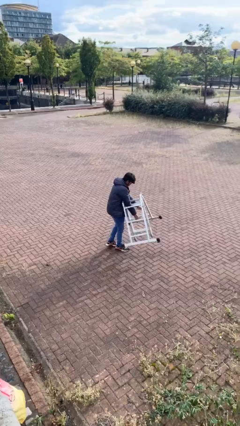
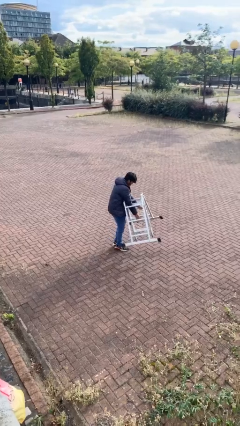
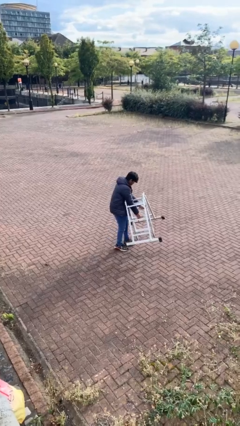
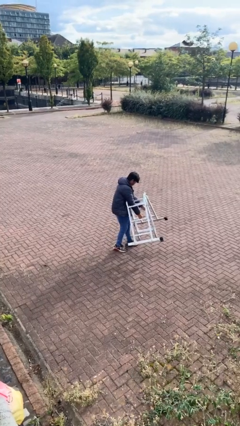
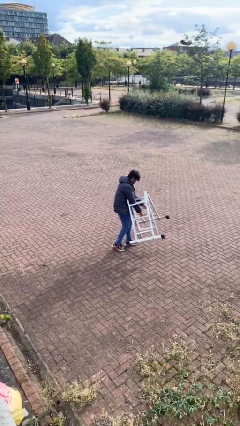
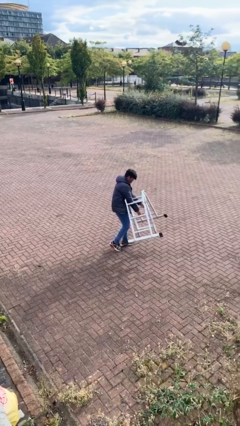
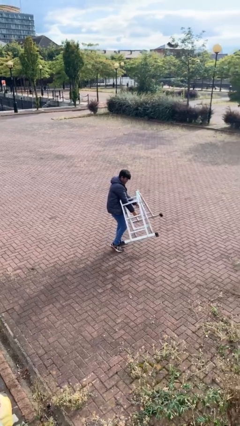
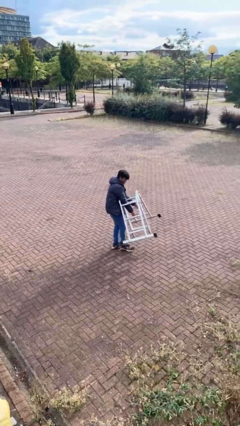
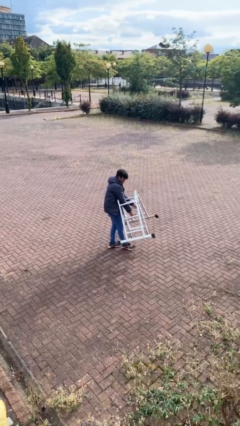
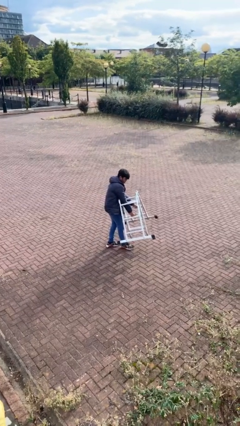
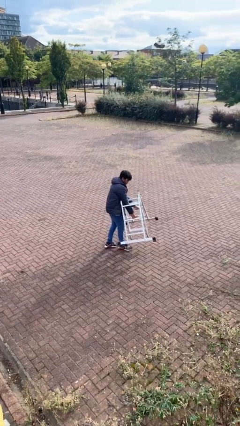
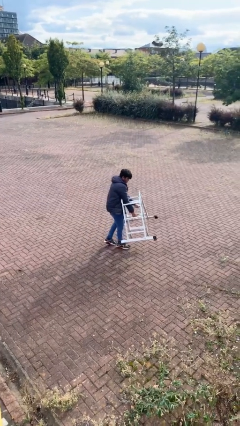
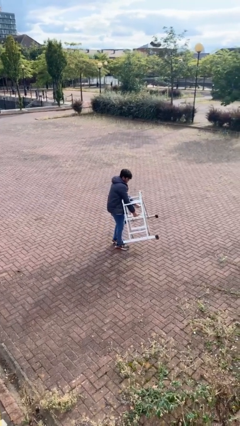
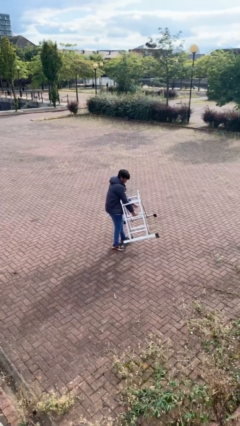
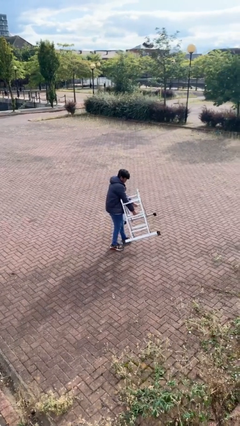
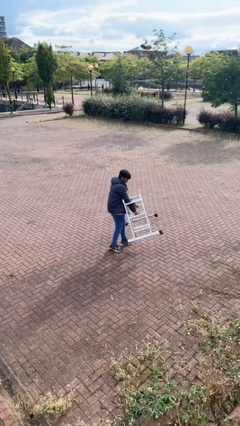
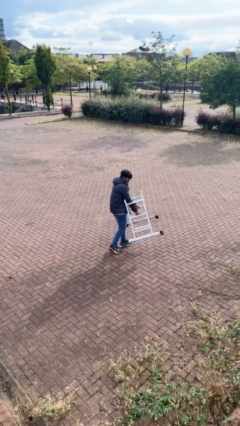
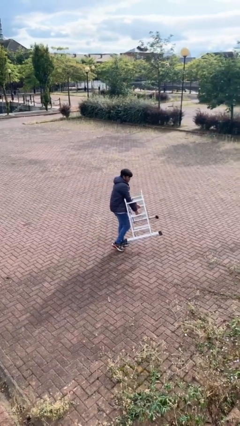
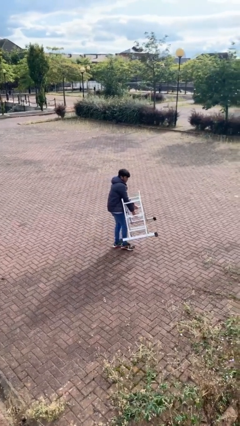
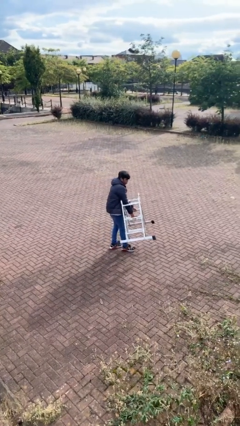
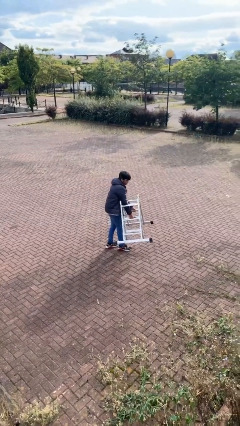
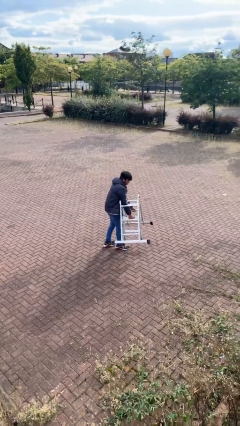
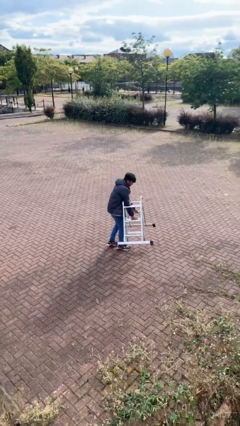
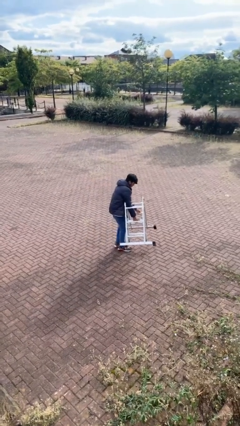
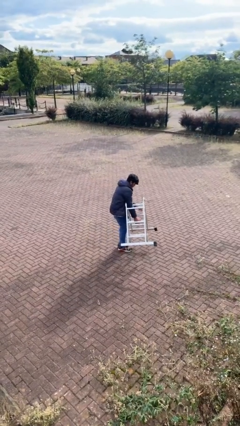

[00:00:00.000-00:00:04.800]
person carries heavy object

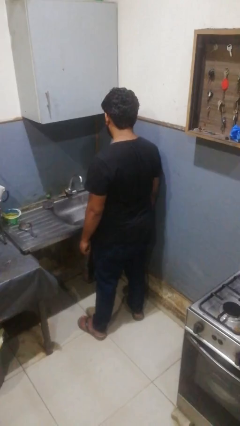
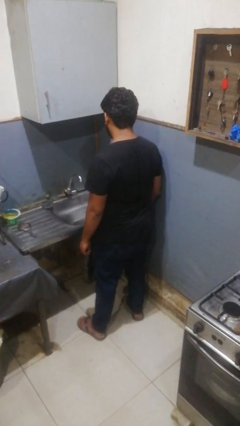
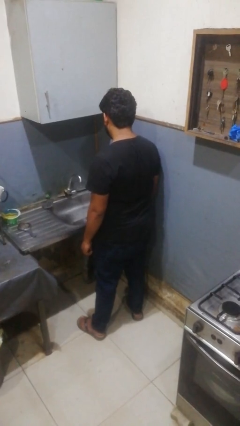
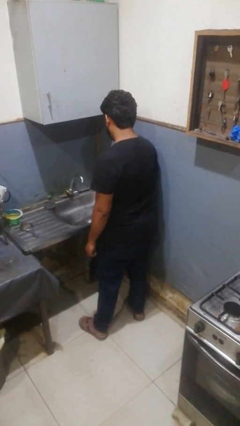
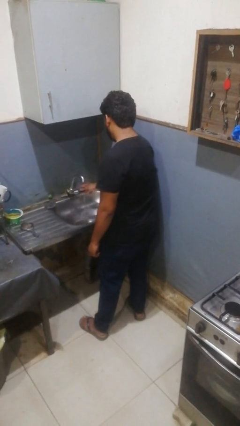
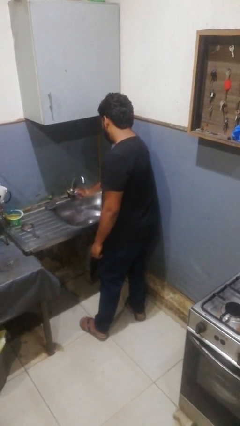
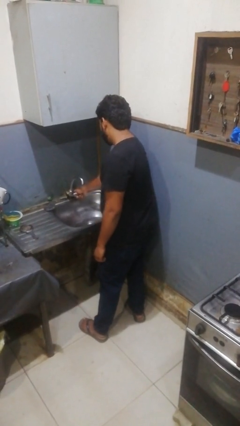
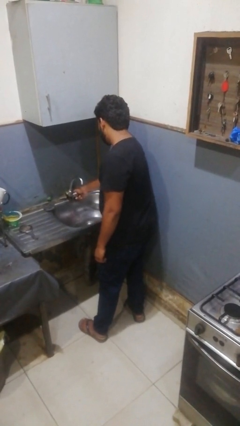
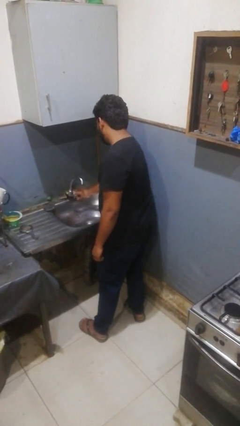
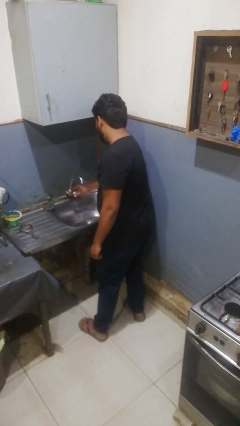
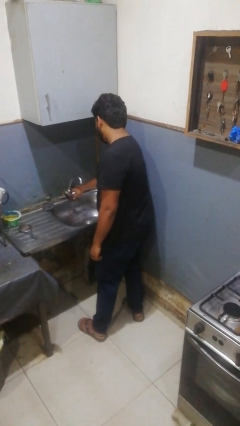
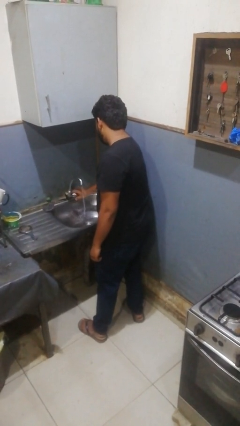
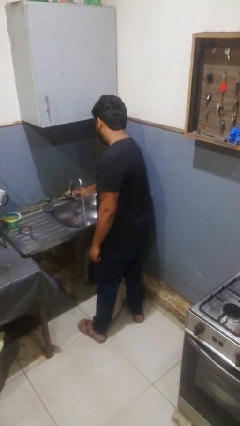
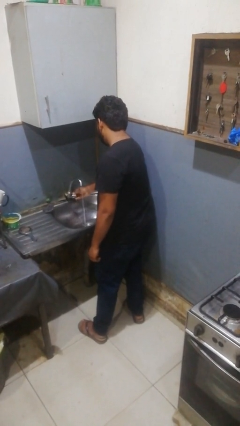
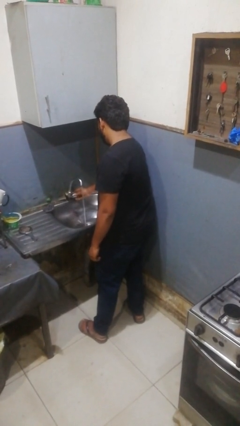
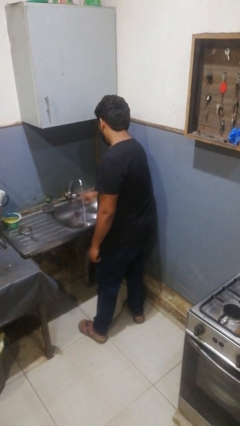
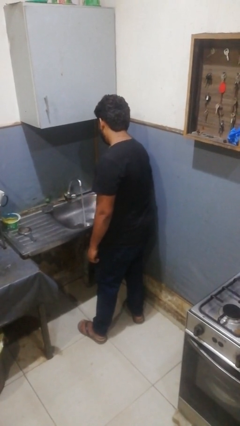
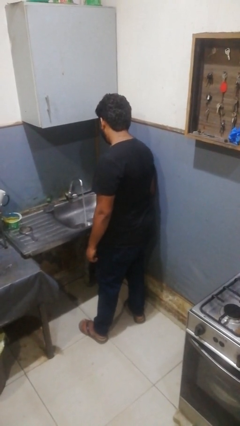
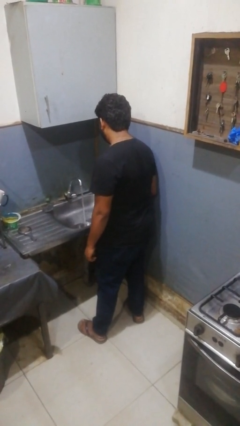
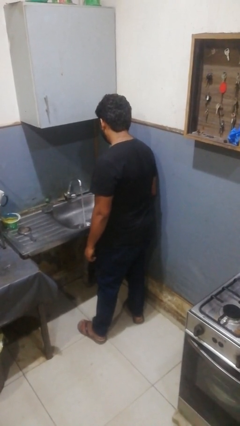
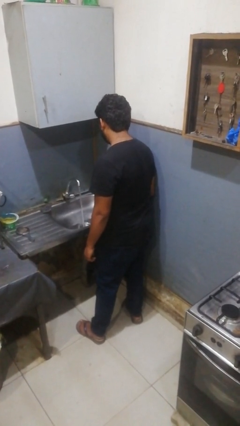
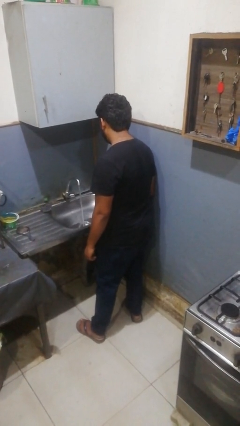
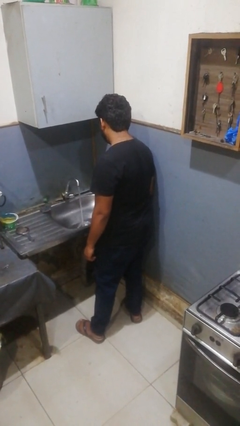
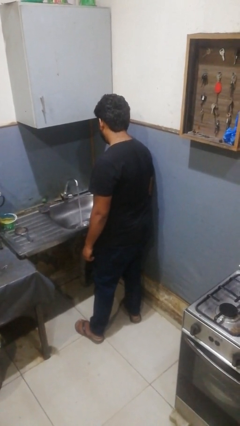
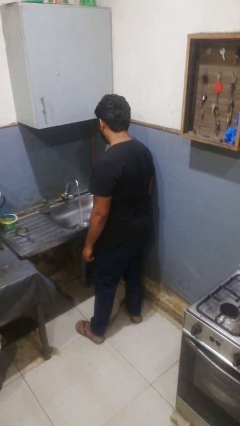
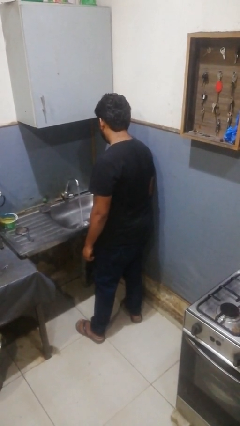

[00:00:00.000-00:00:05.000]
person turns on faucet

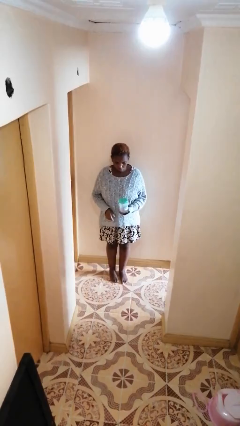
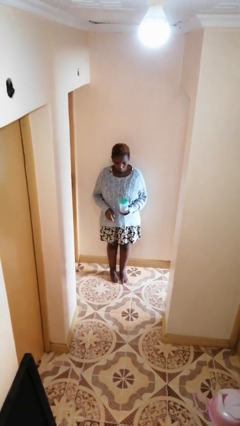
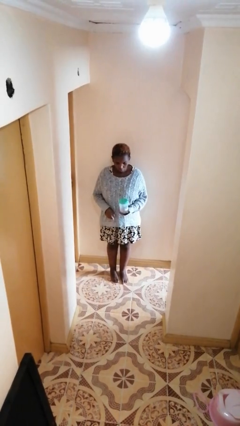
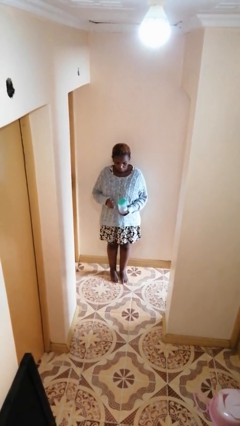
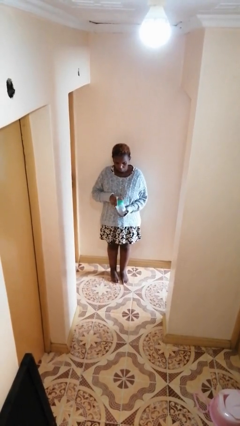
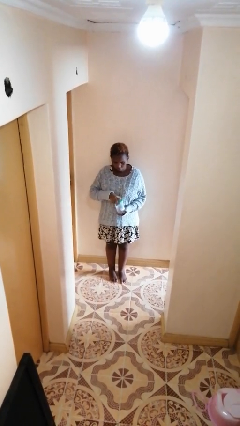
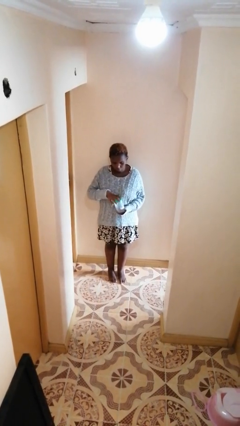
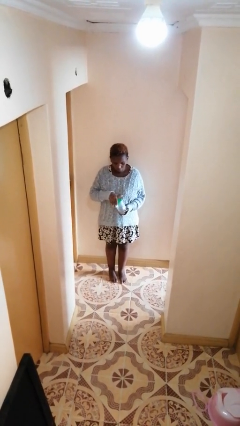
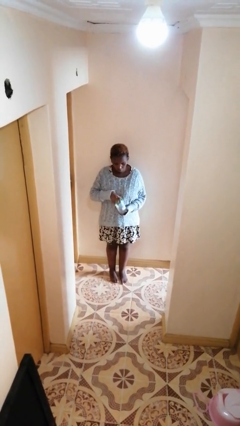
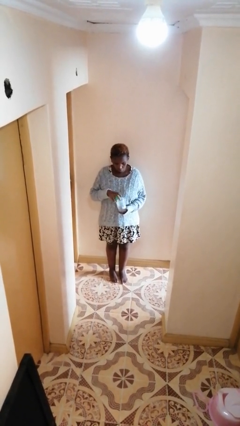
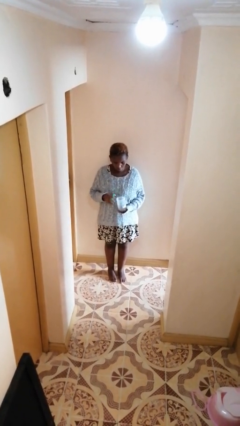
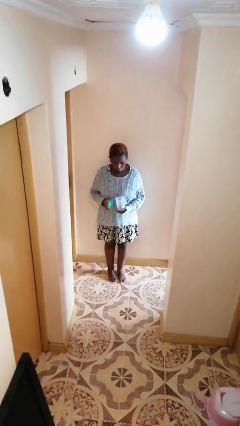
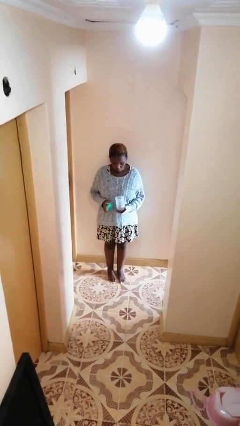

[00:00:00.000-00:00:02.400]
person opens jar

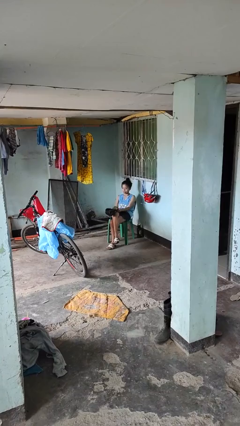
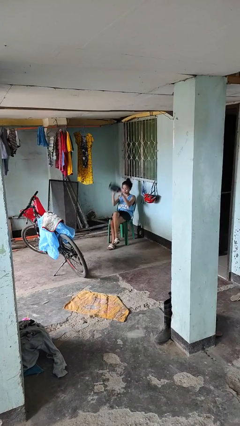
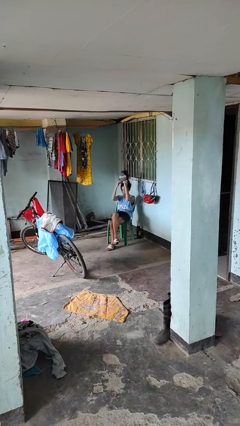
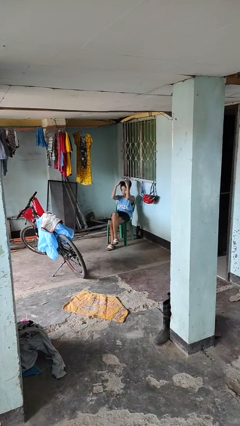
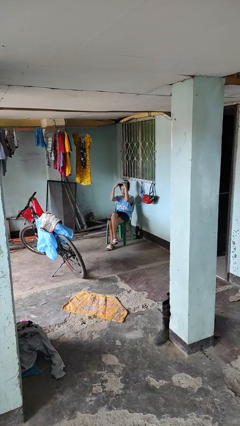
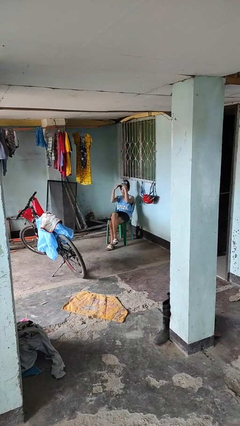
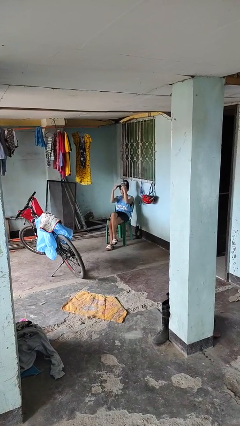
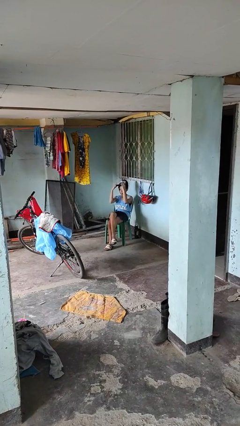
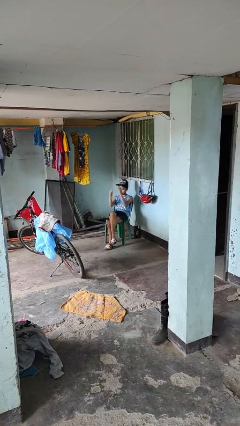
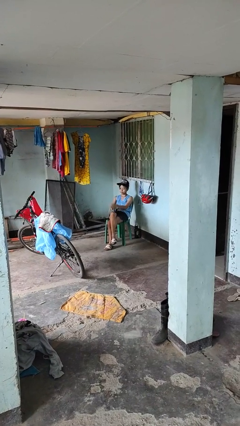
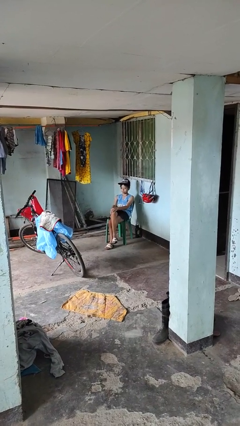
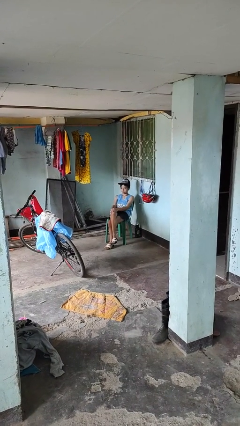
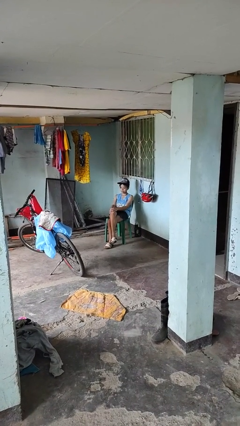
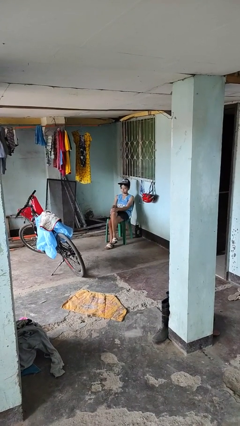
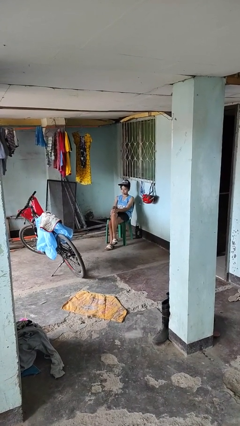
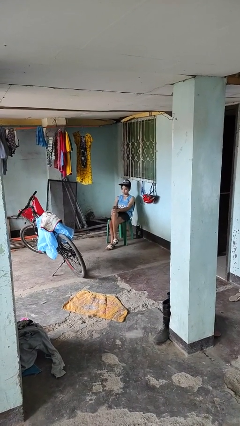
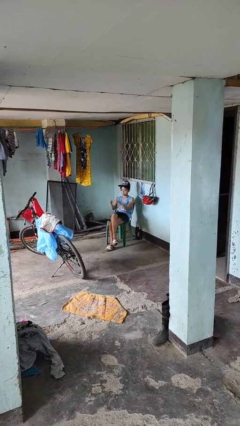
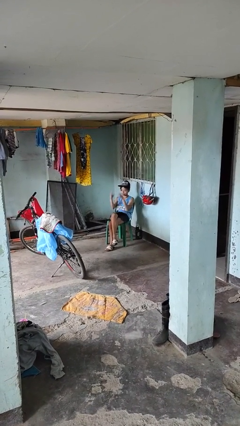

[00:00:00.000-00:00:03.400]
person puts on hat

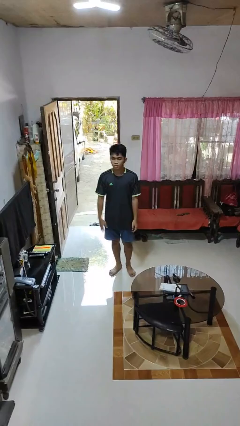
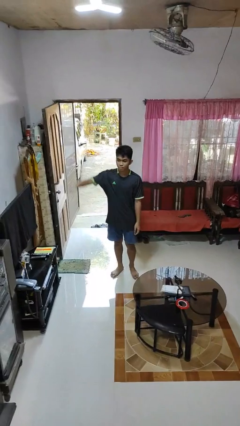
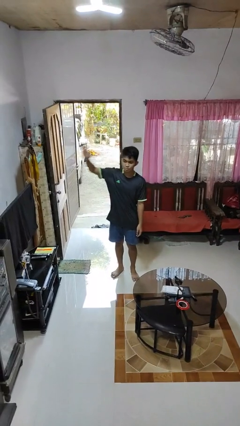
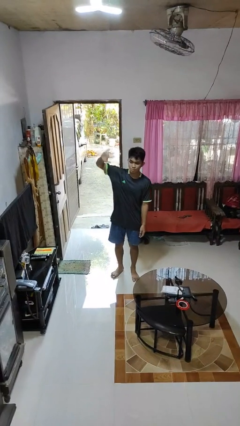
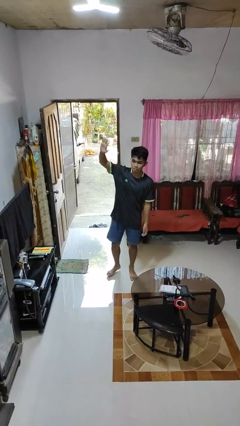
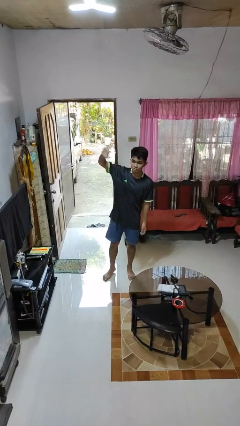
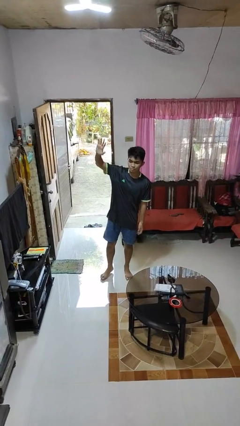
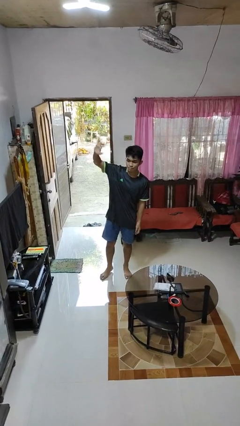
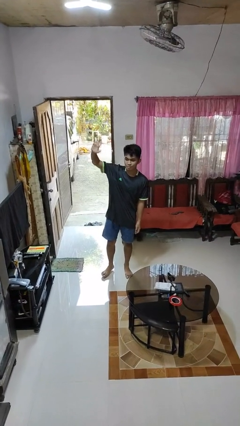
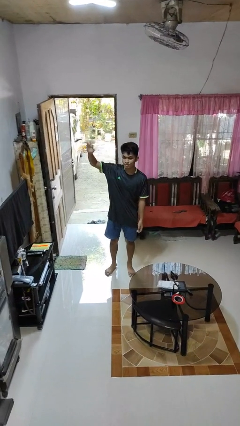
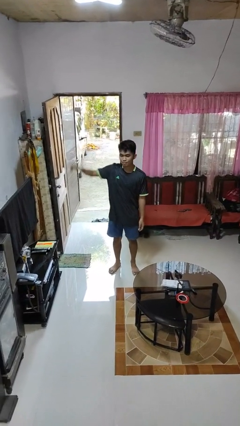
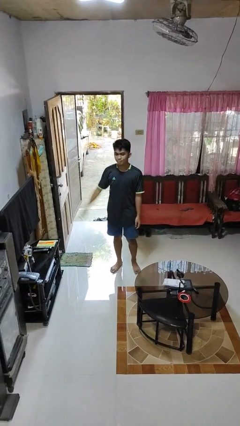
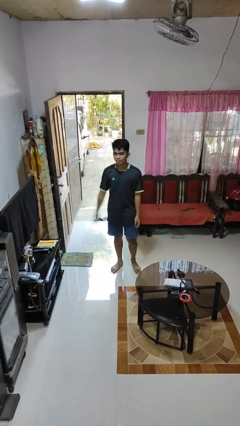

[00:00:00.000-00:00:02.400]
person waves at person
